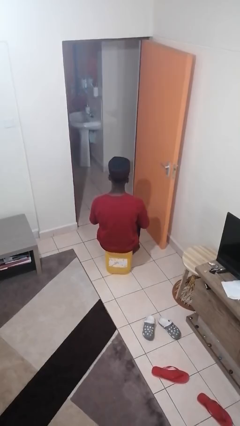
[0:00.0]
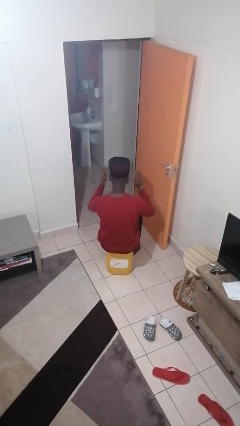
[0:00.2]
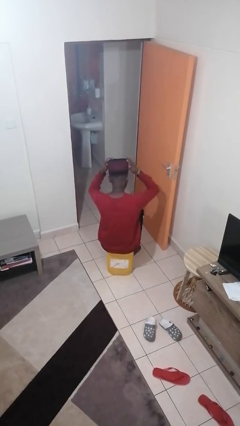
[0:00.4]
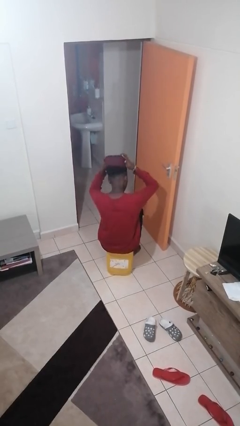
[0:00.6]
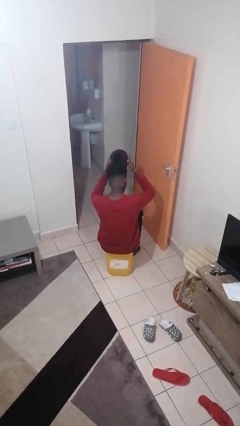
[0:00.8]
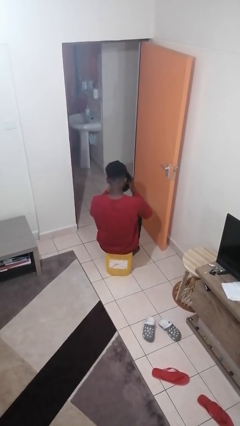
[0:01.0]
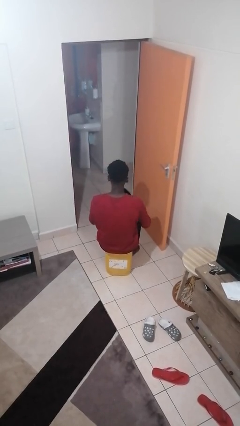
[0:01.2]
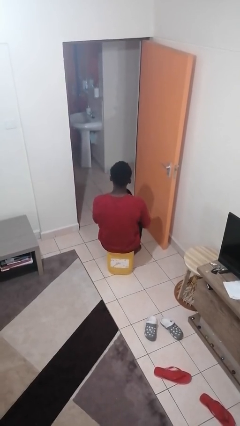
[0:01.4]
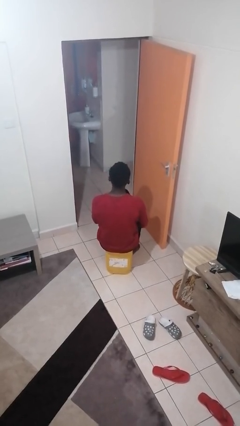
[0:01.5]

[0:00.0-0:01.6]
person takes off hat

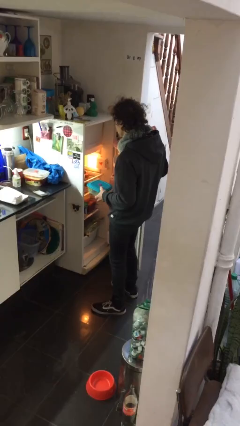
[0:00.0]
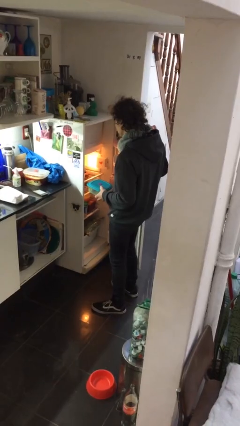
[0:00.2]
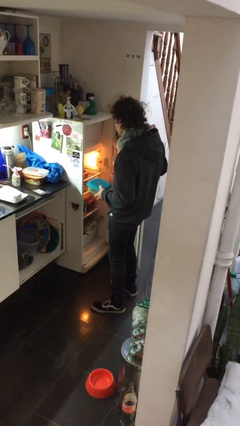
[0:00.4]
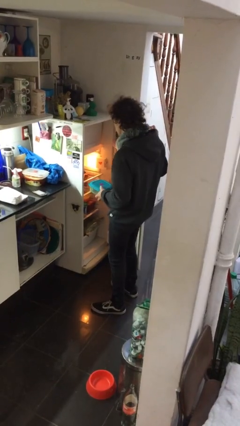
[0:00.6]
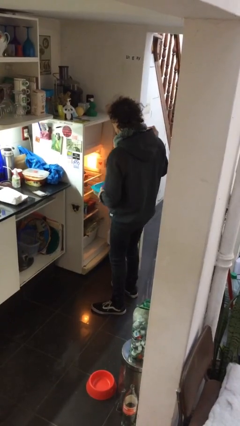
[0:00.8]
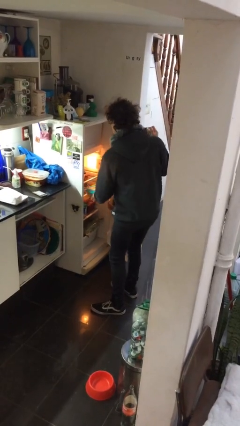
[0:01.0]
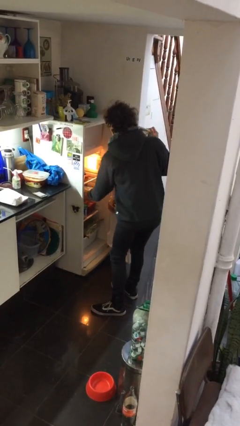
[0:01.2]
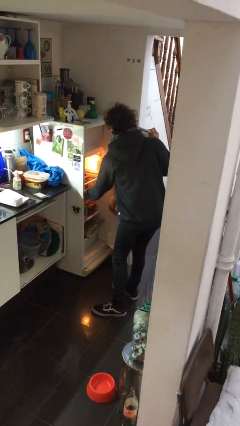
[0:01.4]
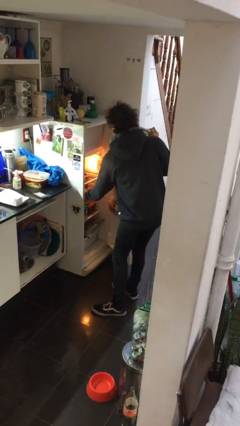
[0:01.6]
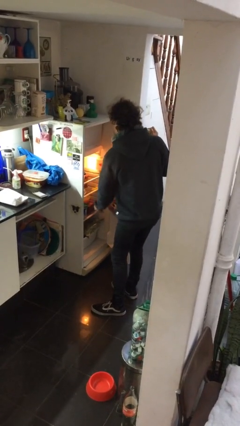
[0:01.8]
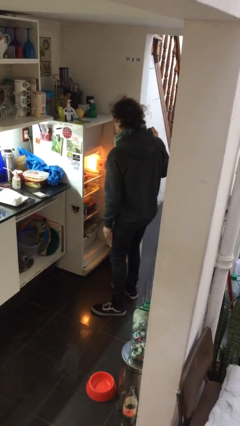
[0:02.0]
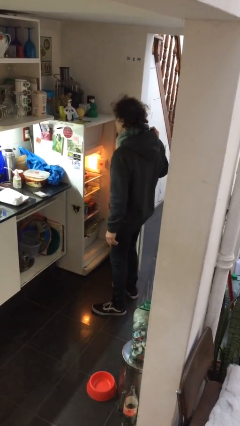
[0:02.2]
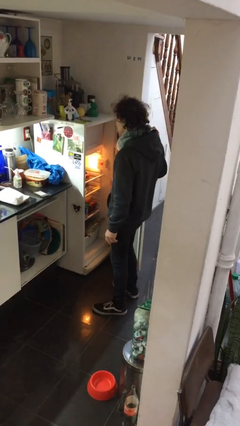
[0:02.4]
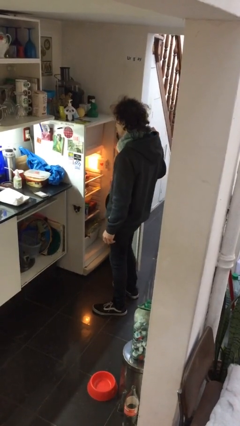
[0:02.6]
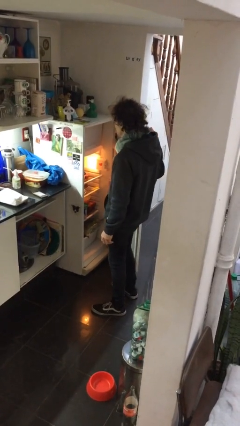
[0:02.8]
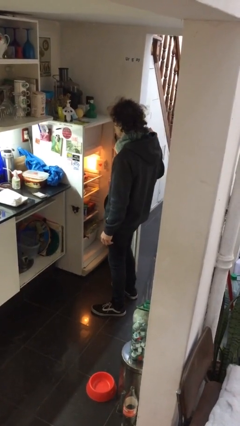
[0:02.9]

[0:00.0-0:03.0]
person puts object into refrigerator

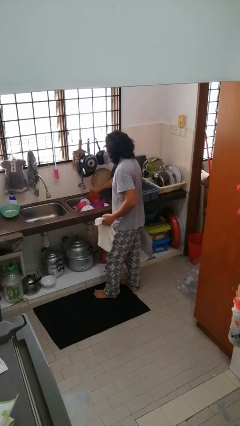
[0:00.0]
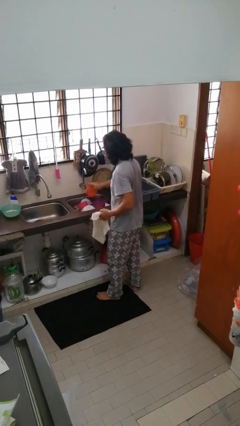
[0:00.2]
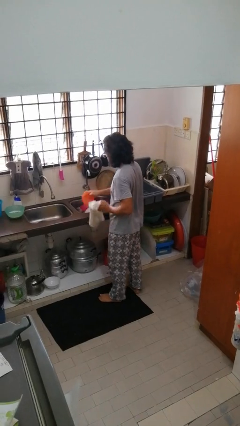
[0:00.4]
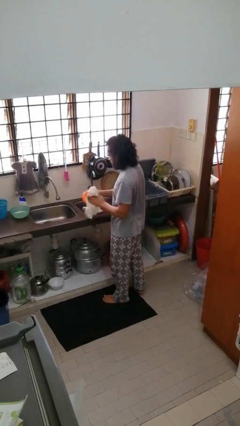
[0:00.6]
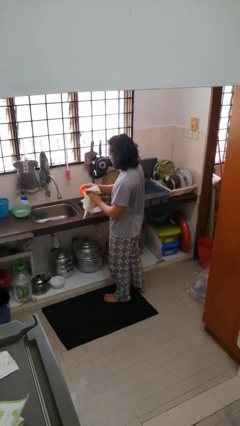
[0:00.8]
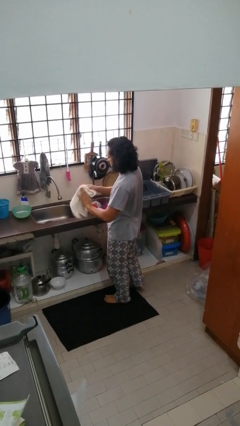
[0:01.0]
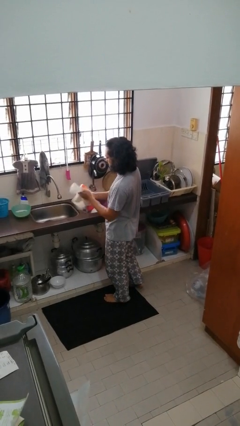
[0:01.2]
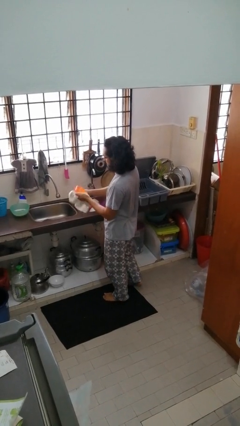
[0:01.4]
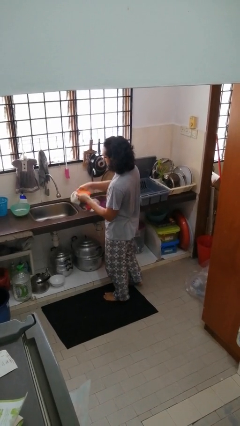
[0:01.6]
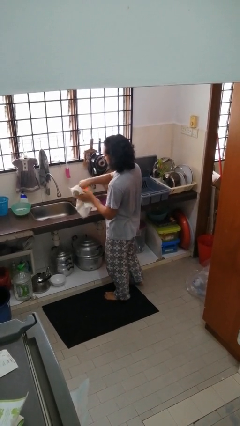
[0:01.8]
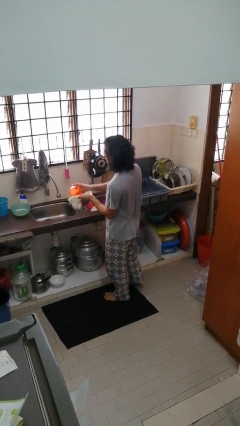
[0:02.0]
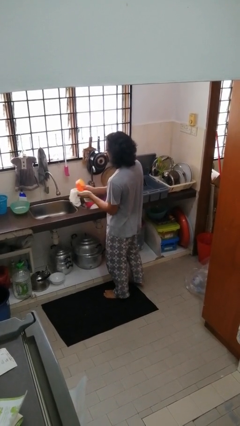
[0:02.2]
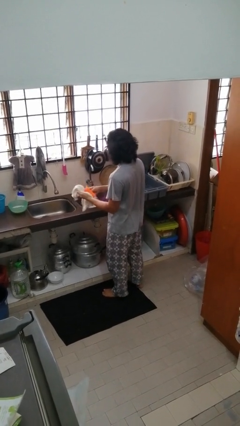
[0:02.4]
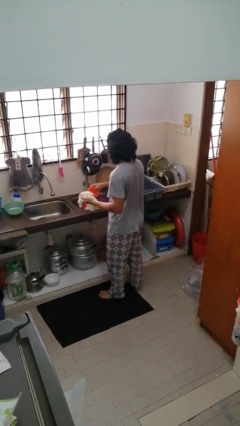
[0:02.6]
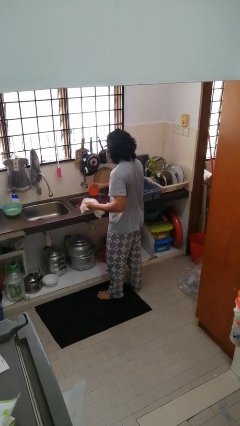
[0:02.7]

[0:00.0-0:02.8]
person dries dish

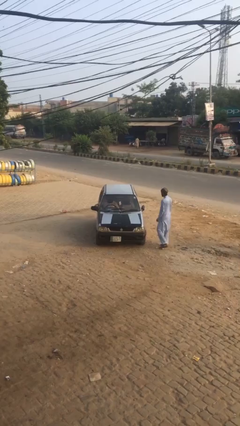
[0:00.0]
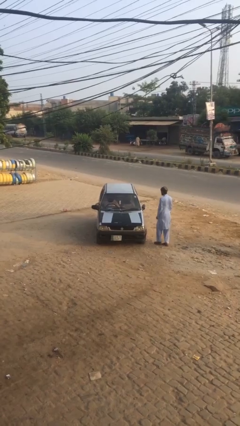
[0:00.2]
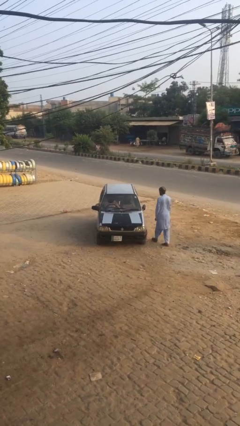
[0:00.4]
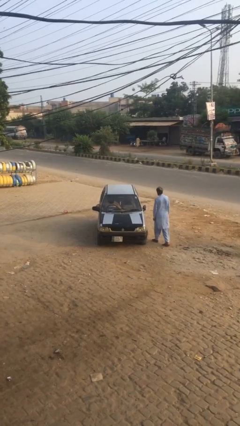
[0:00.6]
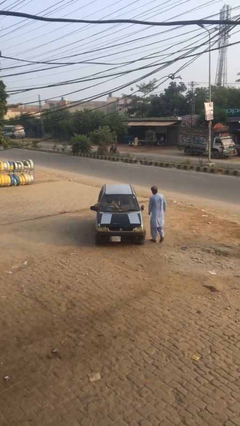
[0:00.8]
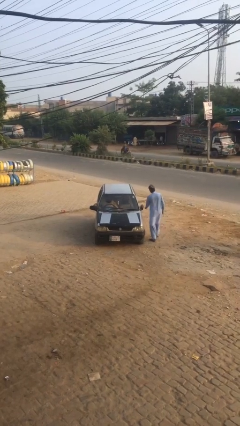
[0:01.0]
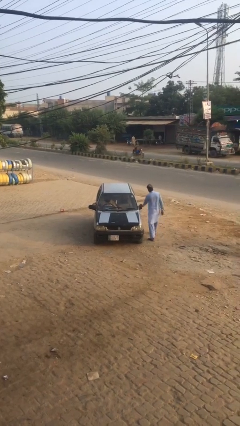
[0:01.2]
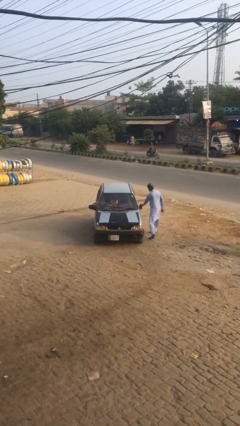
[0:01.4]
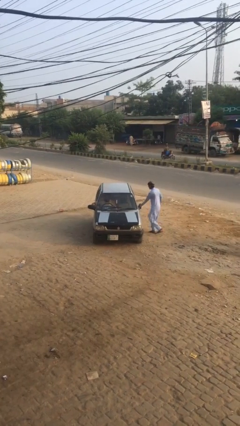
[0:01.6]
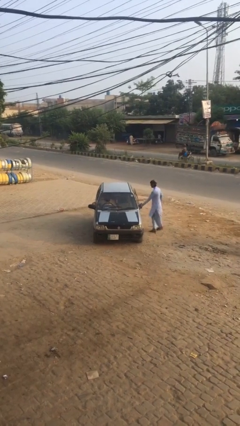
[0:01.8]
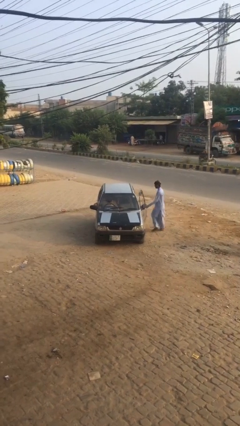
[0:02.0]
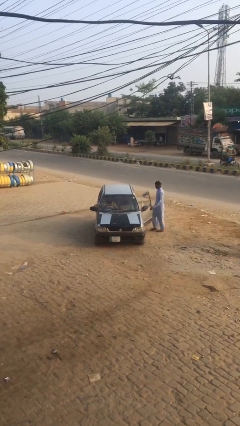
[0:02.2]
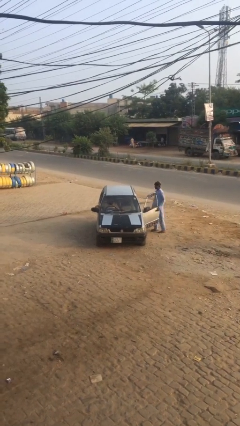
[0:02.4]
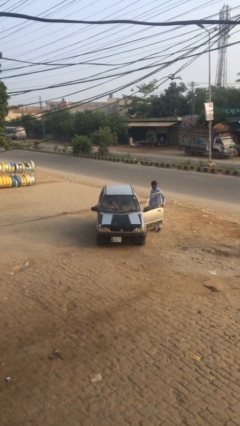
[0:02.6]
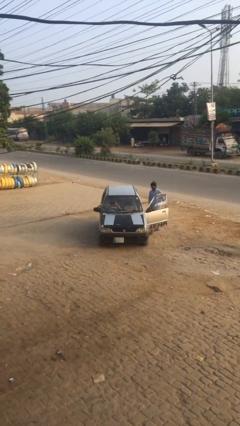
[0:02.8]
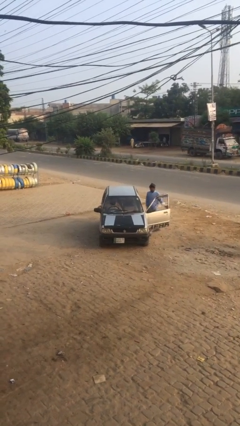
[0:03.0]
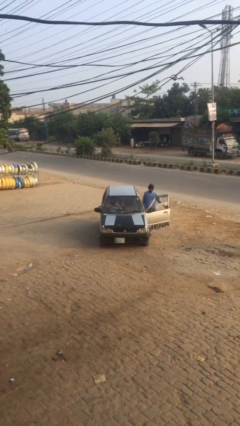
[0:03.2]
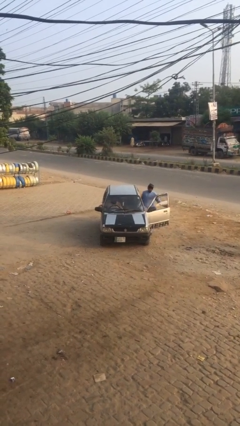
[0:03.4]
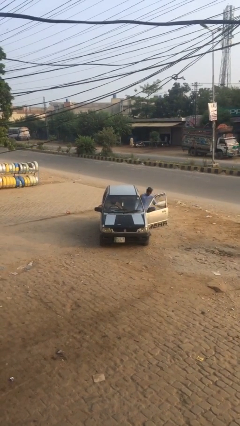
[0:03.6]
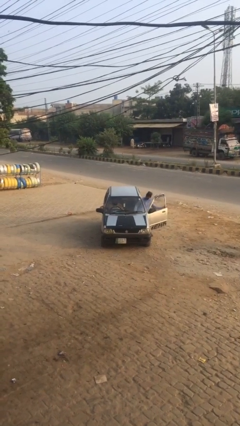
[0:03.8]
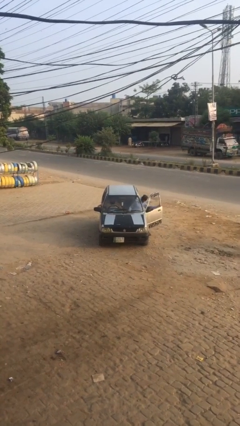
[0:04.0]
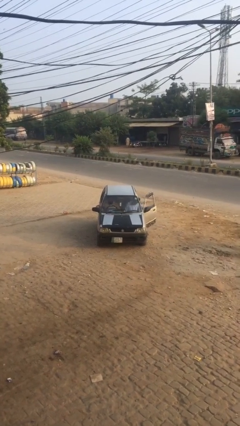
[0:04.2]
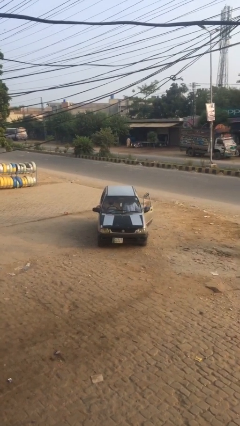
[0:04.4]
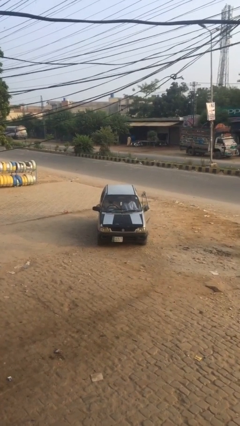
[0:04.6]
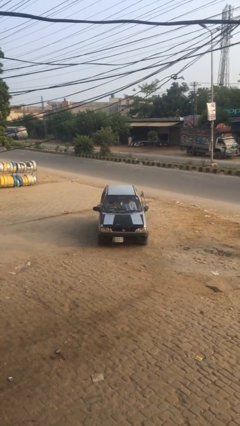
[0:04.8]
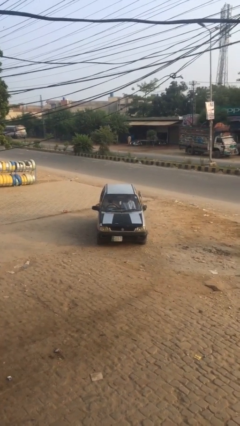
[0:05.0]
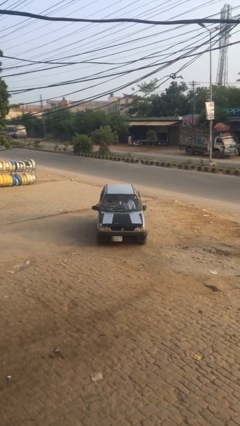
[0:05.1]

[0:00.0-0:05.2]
car picks up person

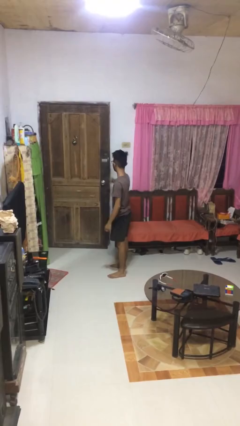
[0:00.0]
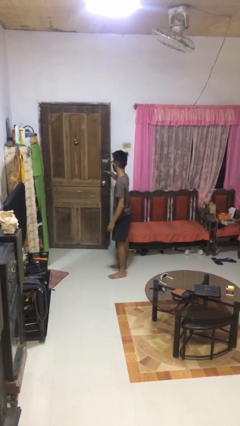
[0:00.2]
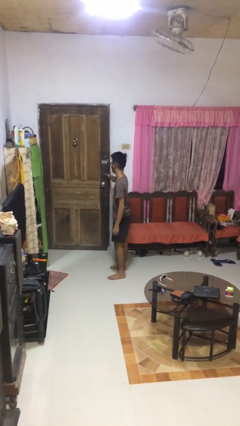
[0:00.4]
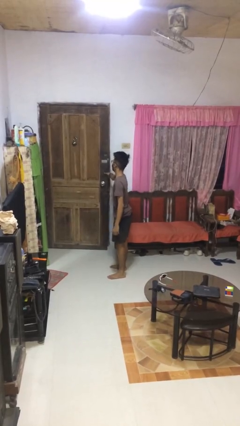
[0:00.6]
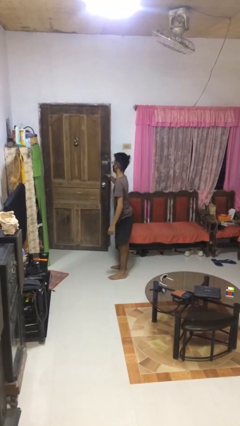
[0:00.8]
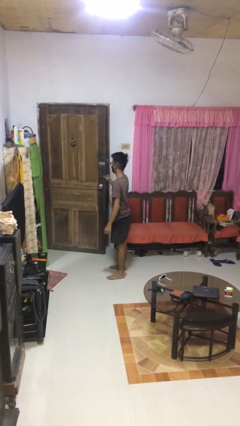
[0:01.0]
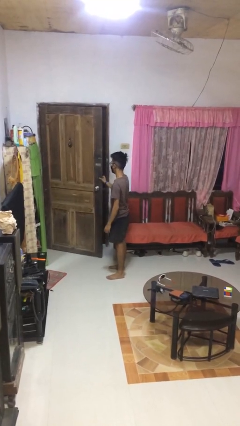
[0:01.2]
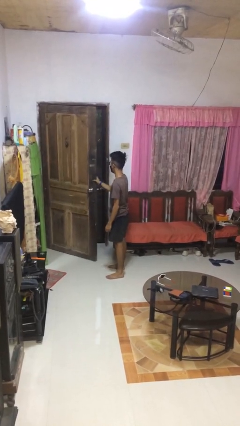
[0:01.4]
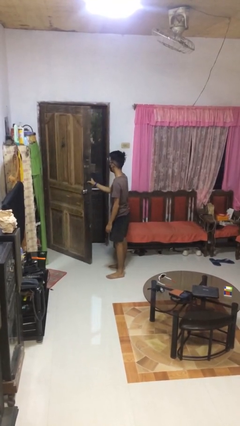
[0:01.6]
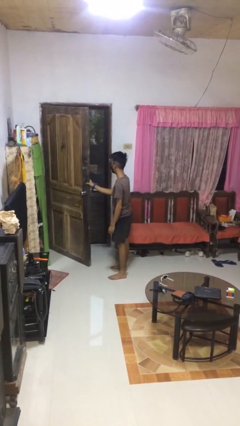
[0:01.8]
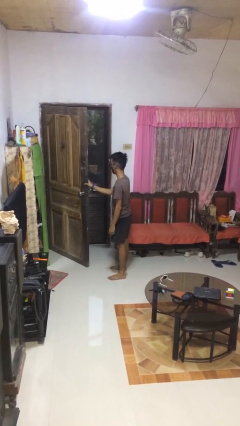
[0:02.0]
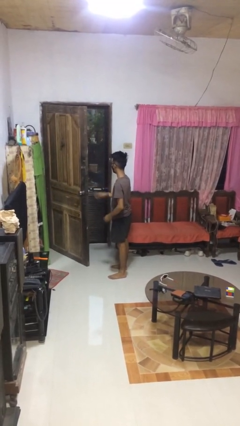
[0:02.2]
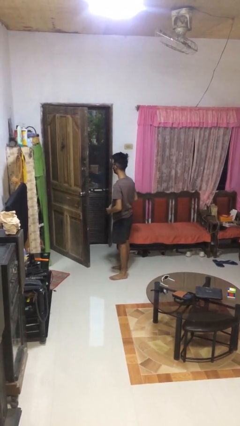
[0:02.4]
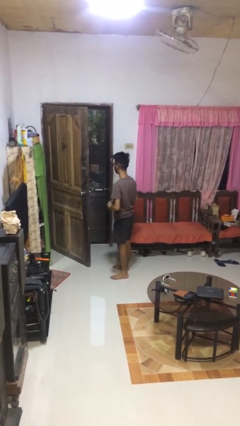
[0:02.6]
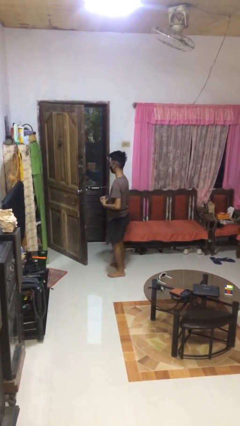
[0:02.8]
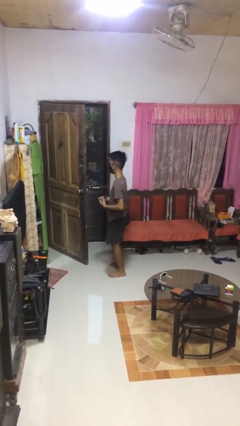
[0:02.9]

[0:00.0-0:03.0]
person opens facility door

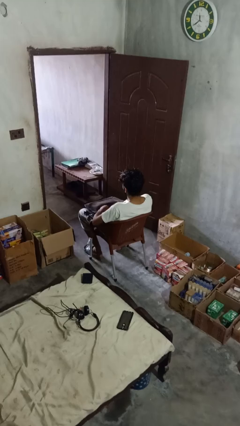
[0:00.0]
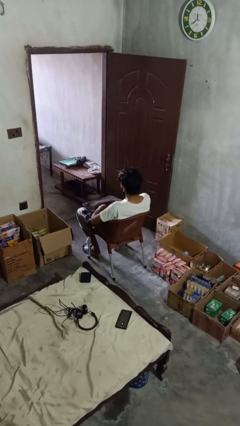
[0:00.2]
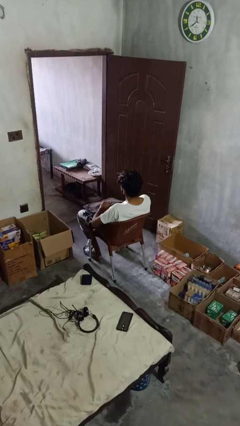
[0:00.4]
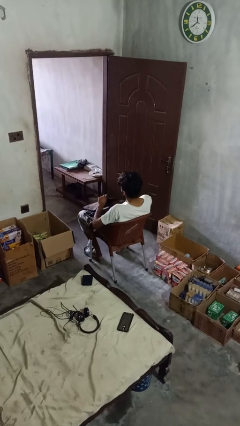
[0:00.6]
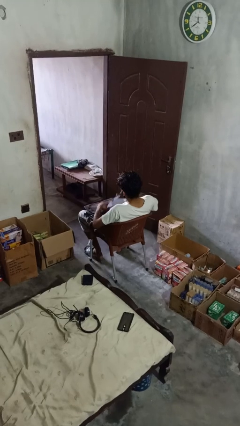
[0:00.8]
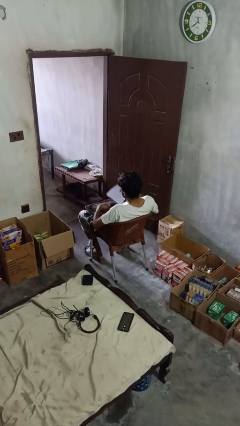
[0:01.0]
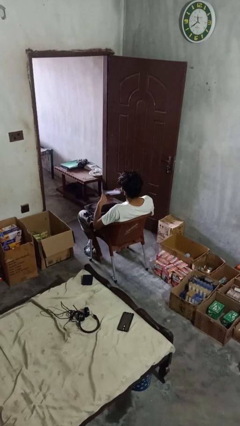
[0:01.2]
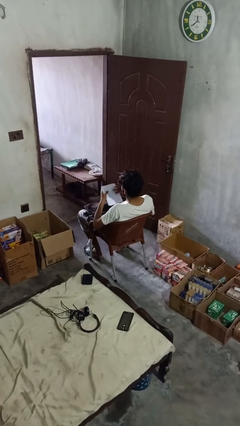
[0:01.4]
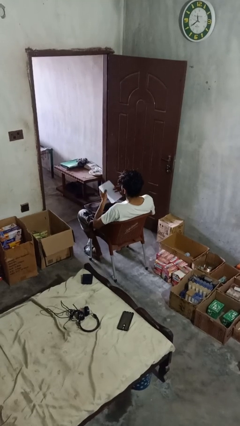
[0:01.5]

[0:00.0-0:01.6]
person searches in backpack

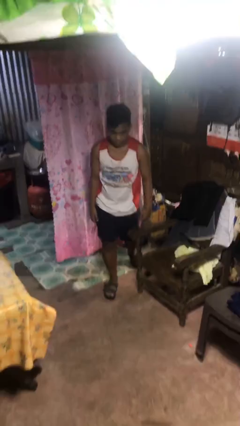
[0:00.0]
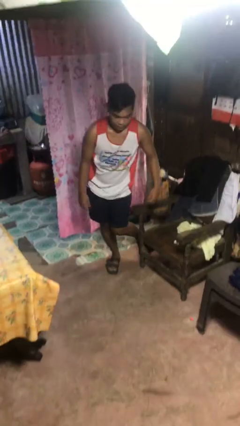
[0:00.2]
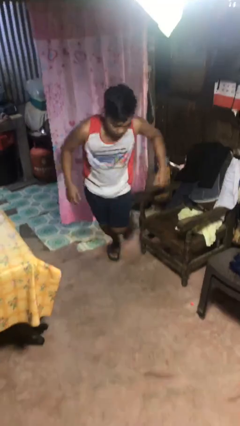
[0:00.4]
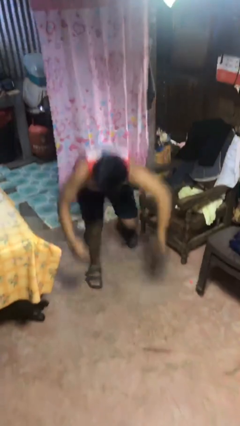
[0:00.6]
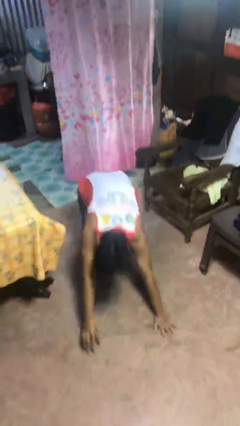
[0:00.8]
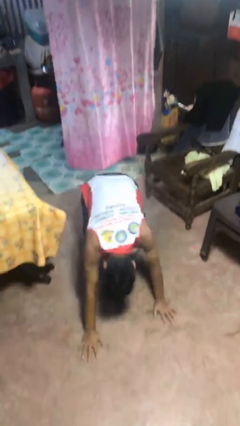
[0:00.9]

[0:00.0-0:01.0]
person trips on object on floor
